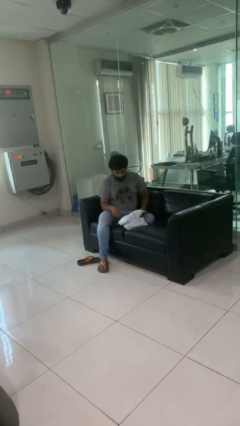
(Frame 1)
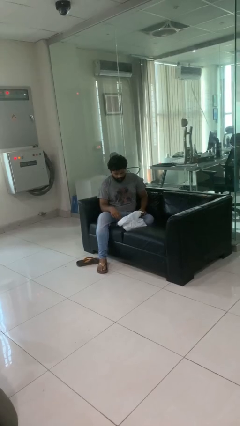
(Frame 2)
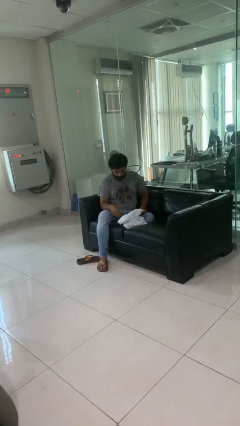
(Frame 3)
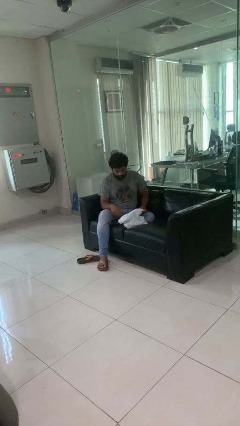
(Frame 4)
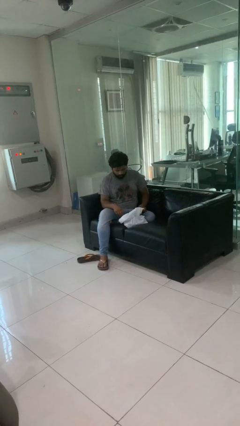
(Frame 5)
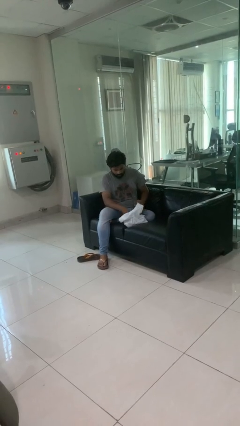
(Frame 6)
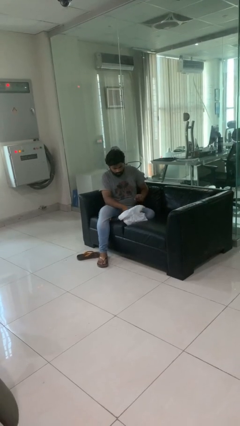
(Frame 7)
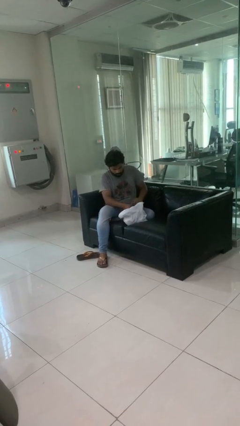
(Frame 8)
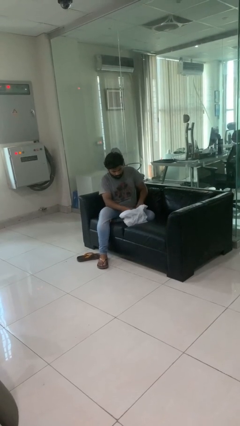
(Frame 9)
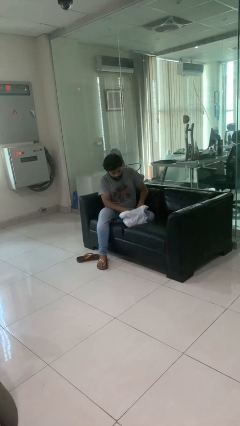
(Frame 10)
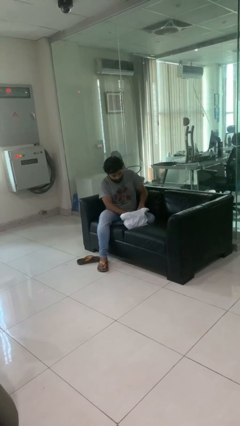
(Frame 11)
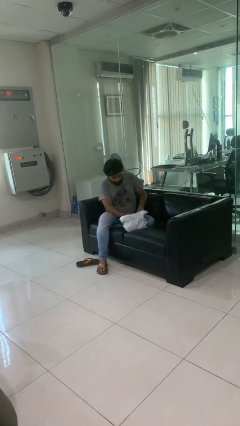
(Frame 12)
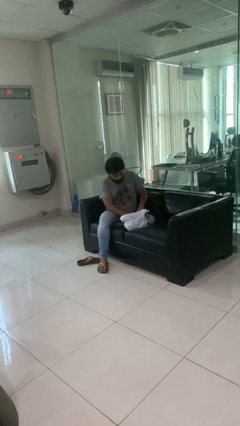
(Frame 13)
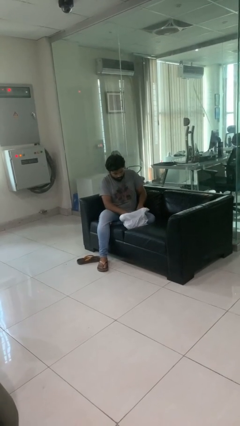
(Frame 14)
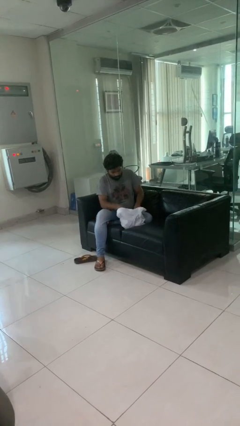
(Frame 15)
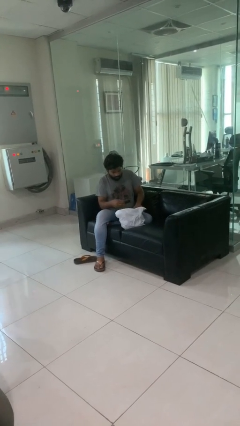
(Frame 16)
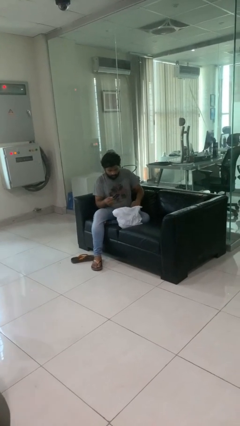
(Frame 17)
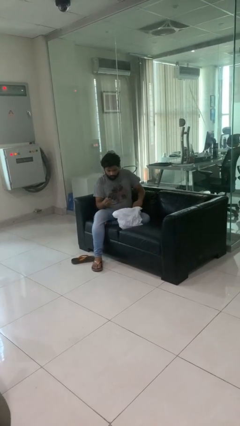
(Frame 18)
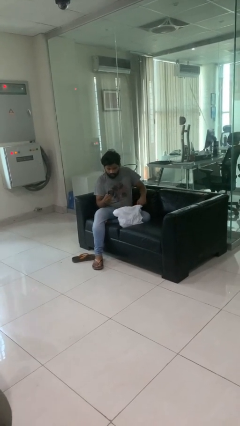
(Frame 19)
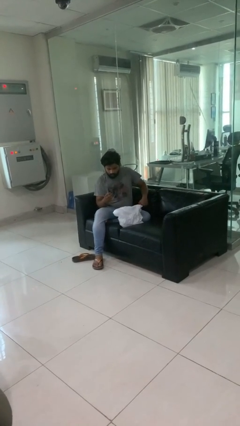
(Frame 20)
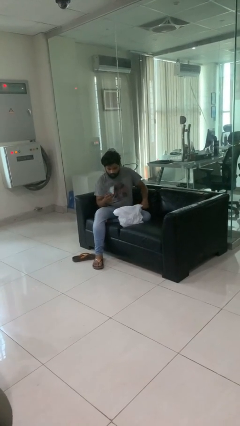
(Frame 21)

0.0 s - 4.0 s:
person takes object from bag

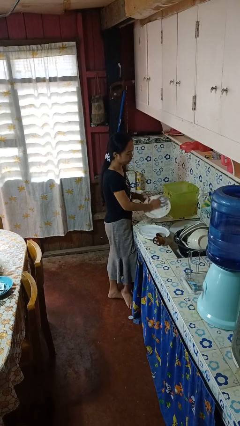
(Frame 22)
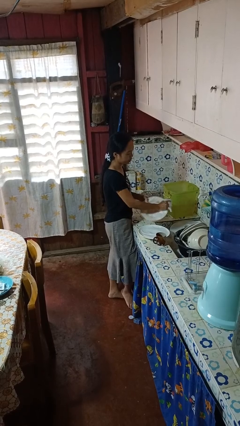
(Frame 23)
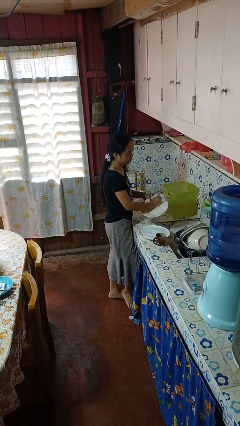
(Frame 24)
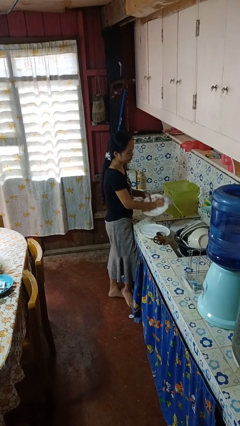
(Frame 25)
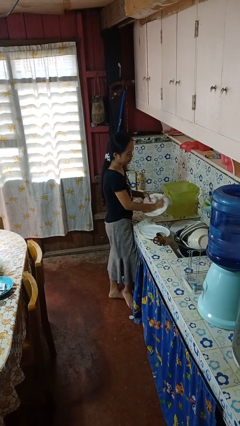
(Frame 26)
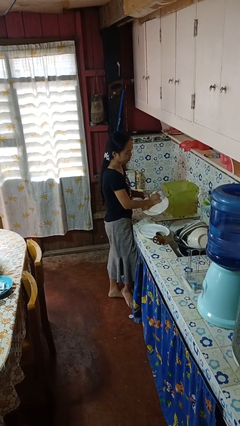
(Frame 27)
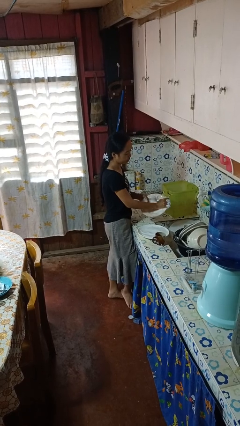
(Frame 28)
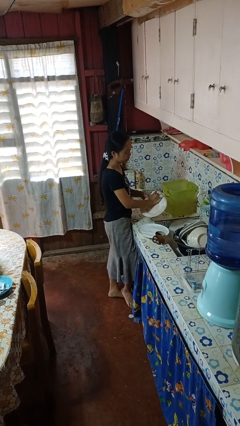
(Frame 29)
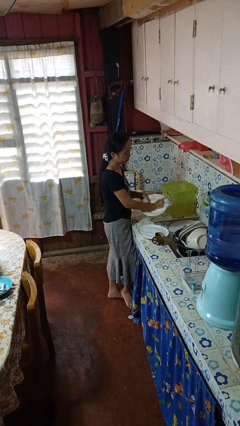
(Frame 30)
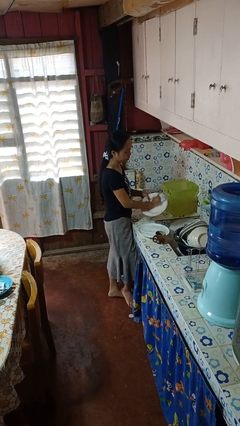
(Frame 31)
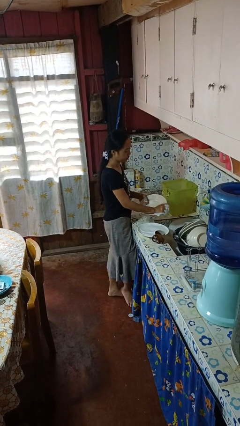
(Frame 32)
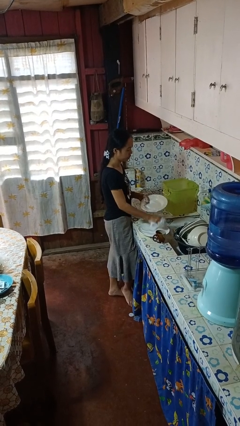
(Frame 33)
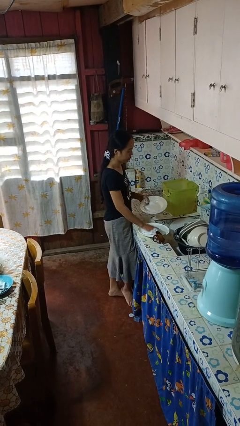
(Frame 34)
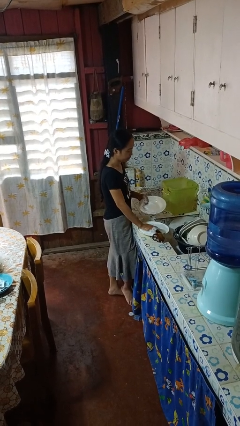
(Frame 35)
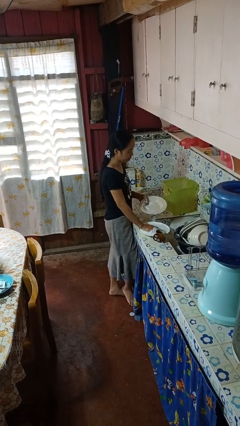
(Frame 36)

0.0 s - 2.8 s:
person washes dish

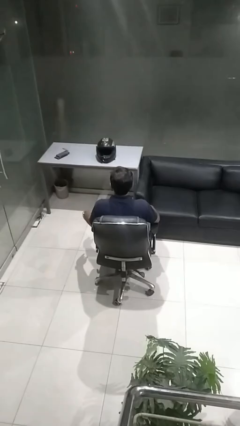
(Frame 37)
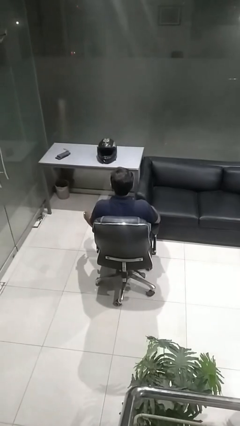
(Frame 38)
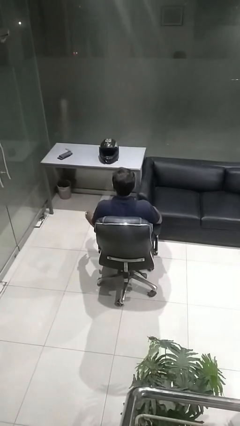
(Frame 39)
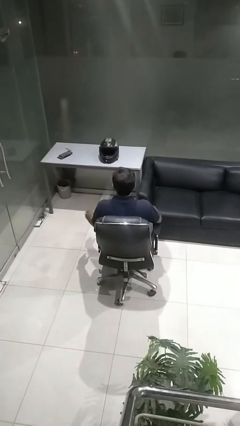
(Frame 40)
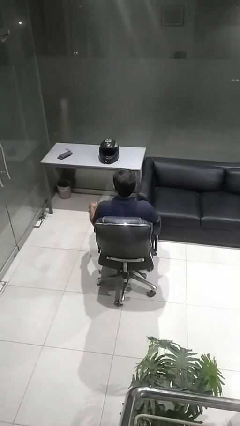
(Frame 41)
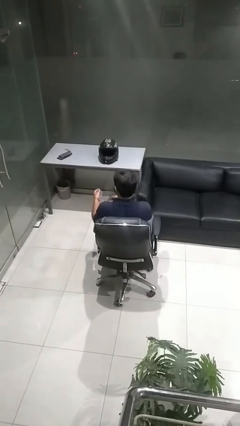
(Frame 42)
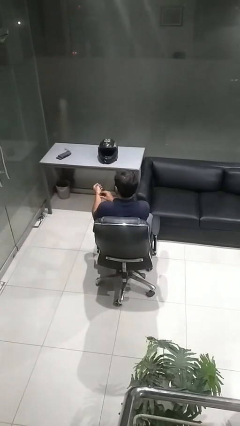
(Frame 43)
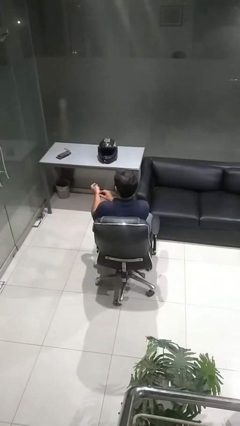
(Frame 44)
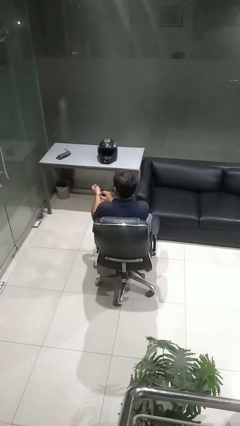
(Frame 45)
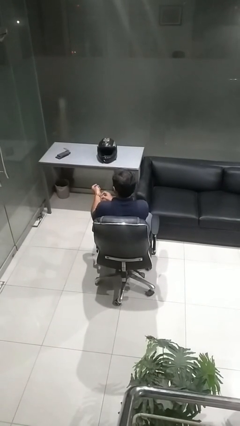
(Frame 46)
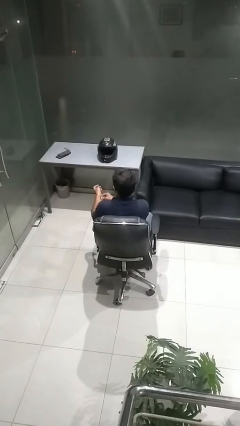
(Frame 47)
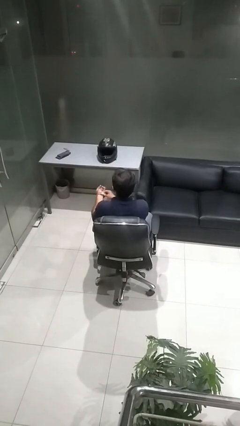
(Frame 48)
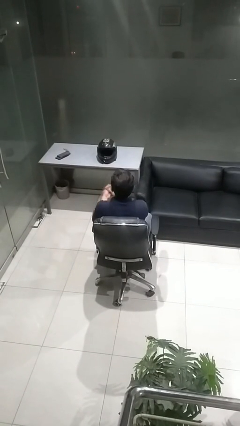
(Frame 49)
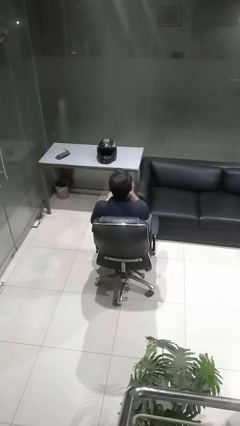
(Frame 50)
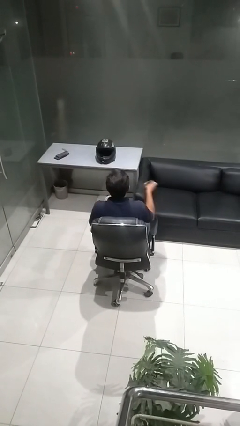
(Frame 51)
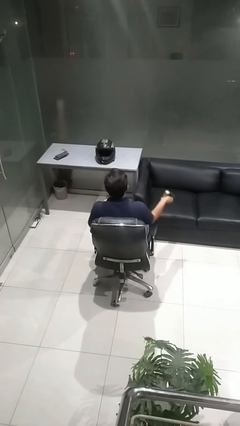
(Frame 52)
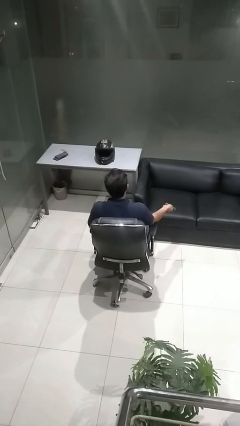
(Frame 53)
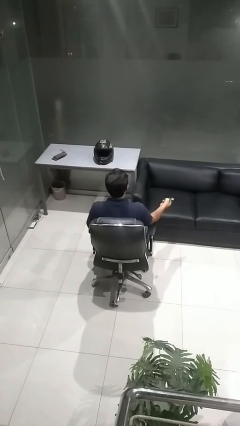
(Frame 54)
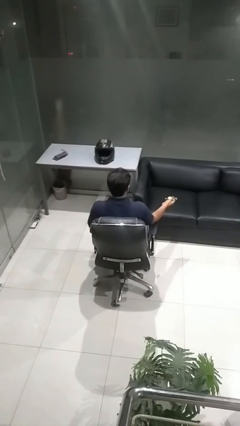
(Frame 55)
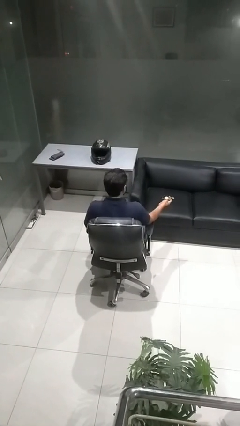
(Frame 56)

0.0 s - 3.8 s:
person takes off wristwatch

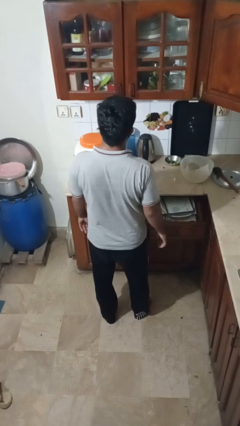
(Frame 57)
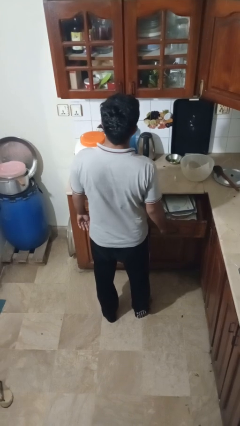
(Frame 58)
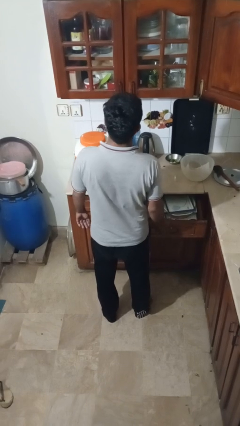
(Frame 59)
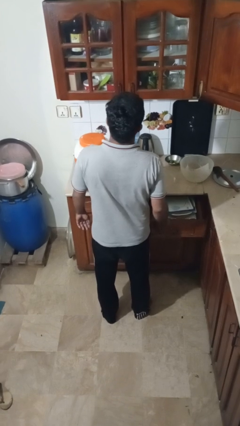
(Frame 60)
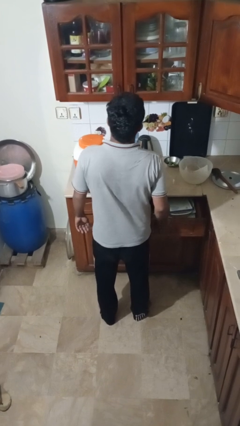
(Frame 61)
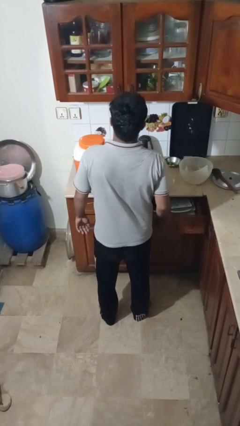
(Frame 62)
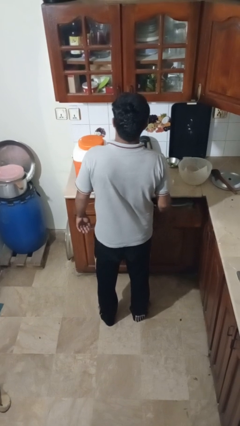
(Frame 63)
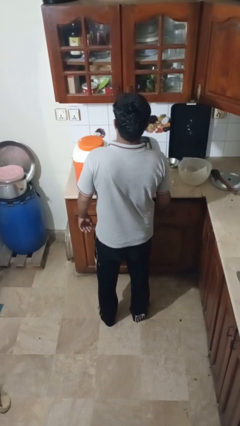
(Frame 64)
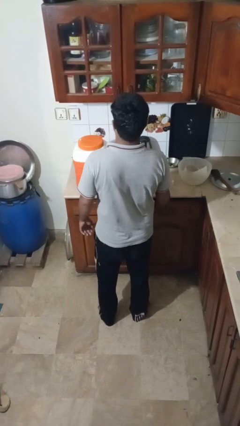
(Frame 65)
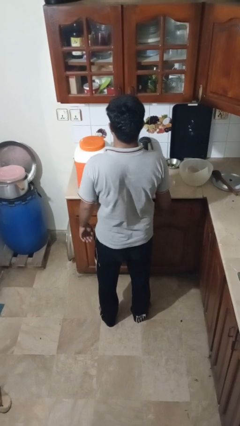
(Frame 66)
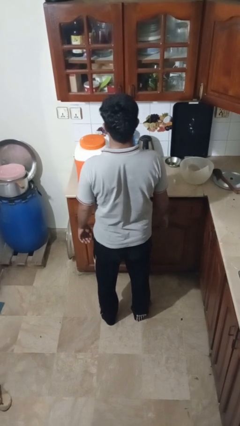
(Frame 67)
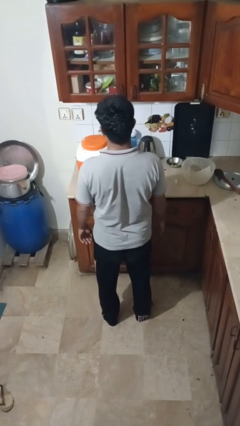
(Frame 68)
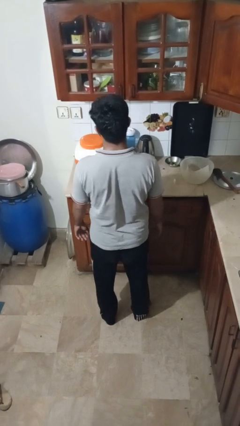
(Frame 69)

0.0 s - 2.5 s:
person closes kitchen drawer

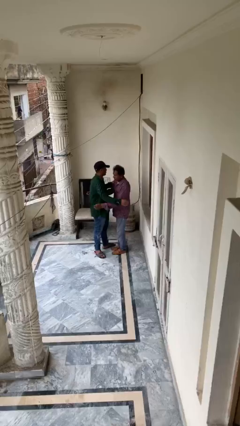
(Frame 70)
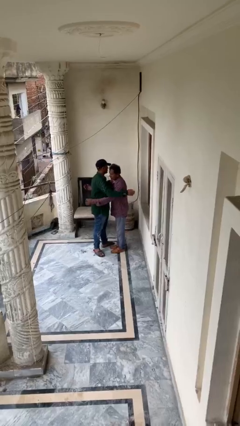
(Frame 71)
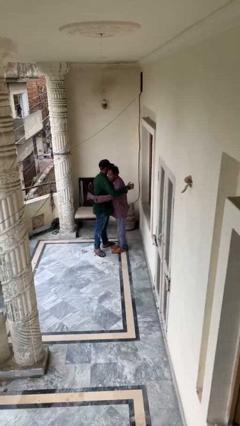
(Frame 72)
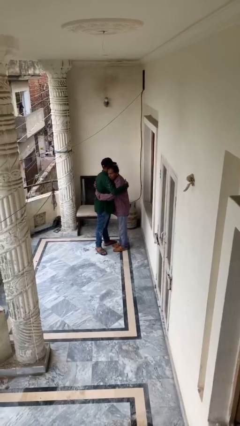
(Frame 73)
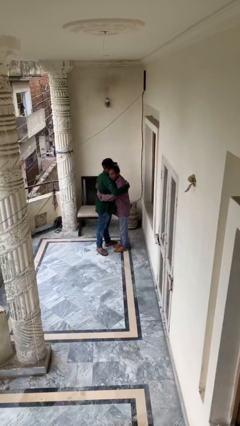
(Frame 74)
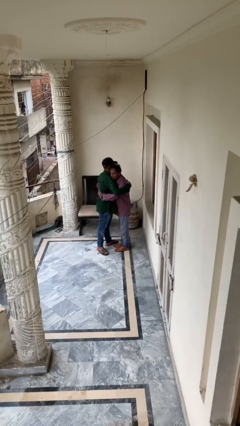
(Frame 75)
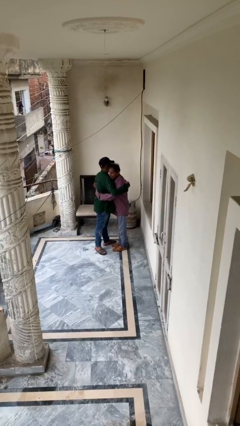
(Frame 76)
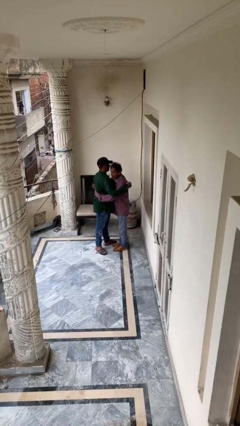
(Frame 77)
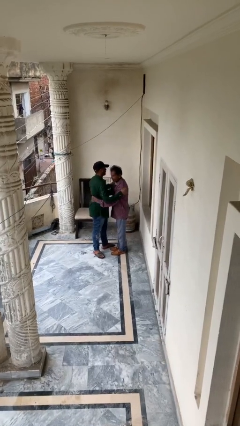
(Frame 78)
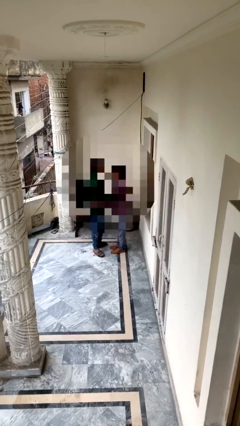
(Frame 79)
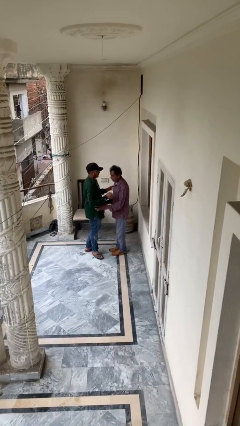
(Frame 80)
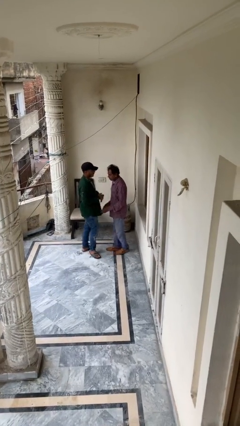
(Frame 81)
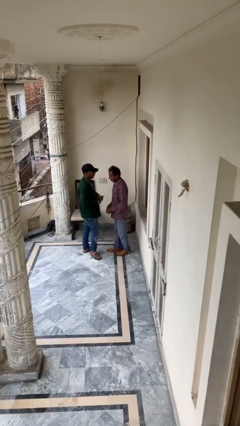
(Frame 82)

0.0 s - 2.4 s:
person embraces person

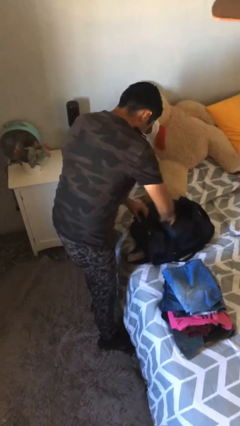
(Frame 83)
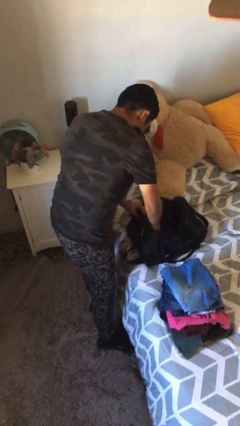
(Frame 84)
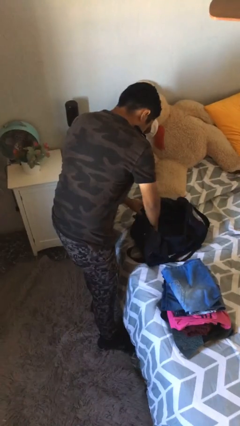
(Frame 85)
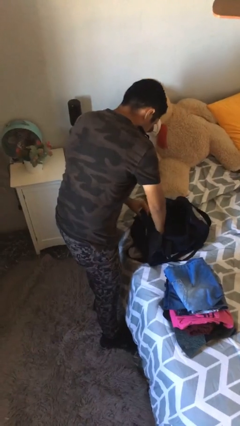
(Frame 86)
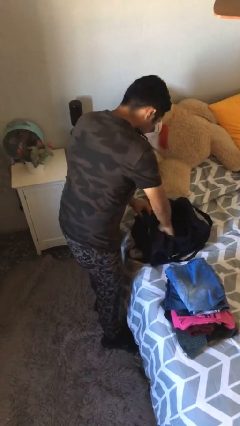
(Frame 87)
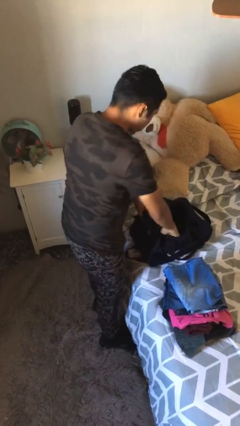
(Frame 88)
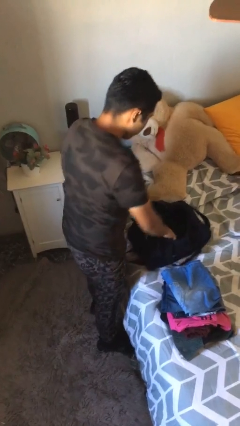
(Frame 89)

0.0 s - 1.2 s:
person loads clothes into suitcase

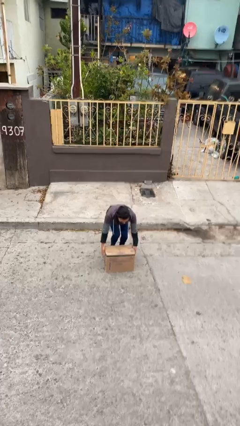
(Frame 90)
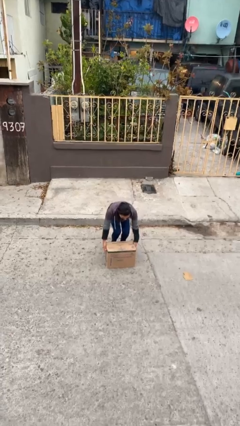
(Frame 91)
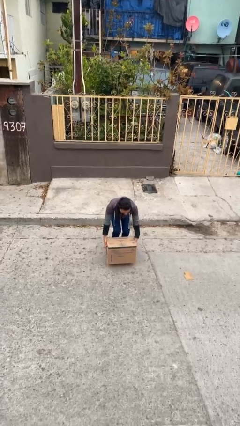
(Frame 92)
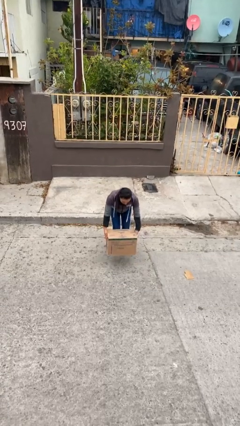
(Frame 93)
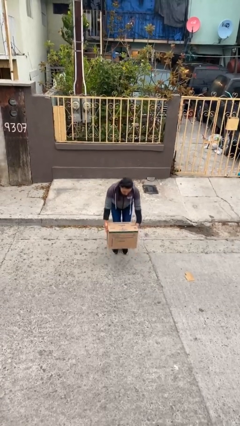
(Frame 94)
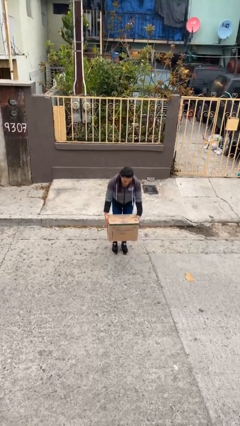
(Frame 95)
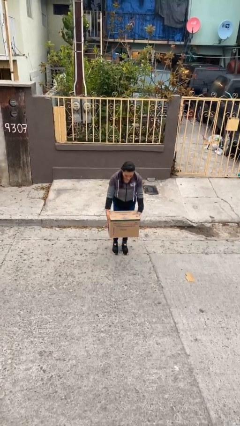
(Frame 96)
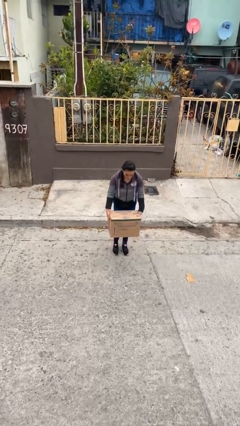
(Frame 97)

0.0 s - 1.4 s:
person picks up object from floor
